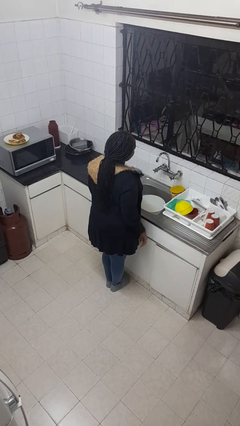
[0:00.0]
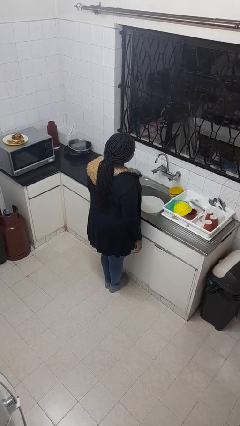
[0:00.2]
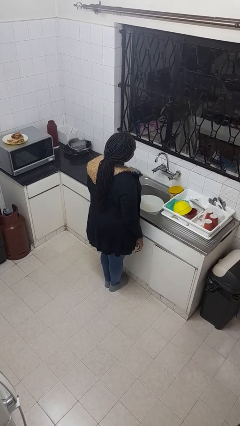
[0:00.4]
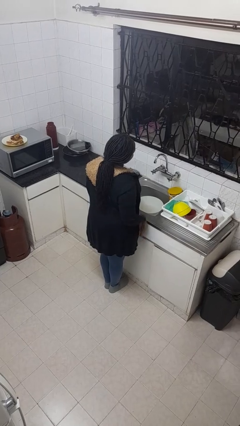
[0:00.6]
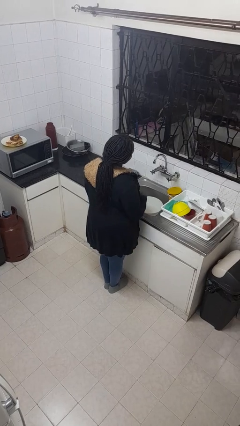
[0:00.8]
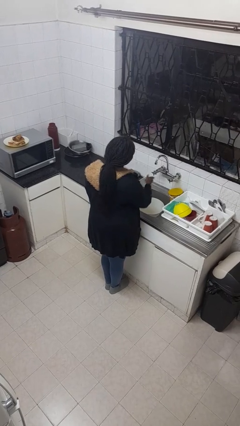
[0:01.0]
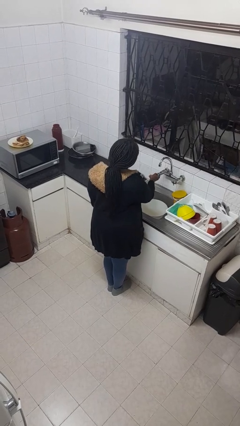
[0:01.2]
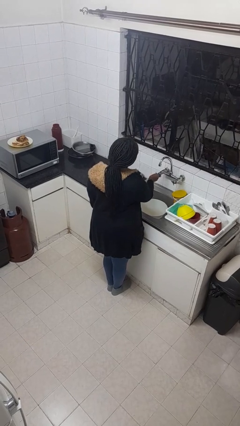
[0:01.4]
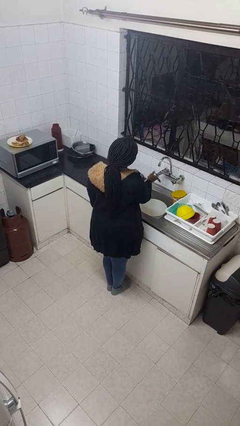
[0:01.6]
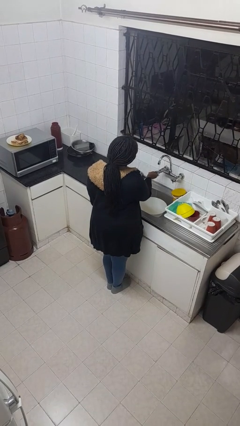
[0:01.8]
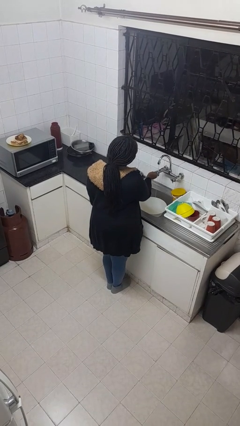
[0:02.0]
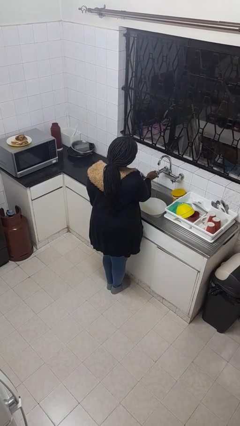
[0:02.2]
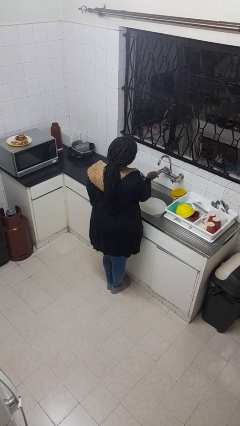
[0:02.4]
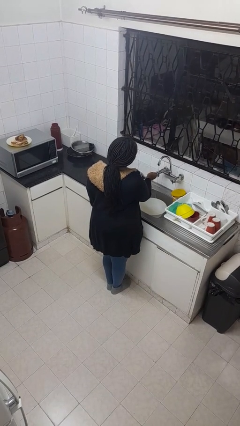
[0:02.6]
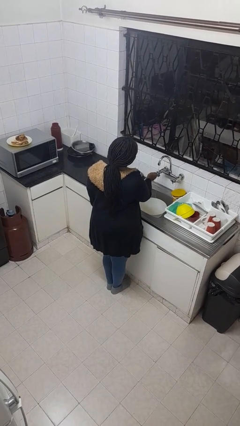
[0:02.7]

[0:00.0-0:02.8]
person turns on faucet

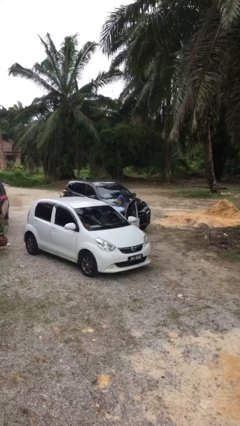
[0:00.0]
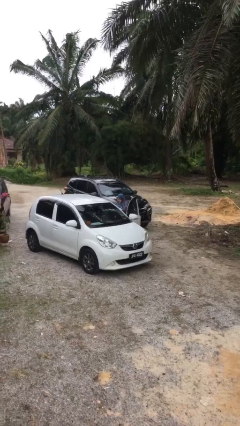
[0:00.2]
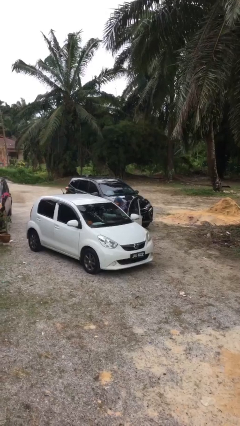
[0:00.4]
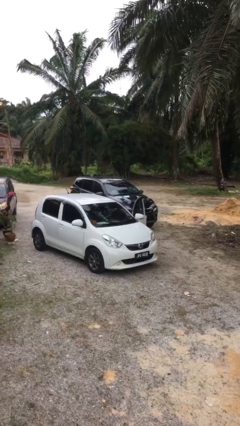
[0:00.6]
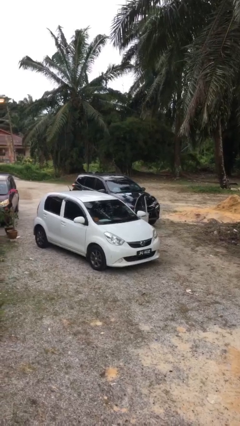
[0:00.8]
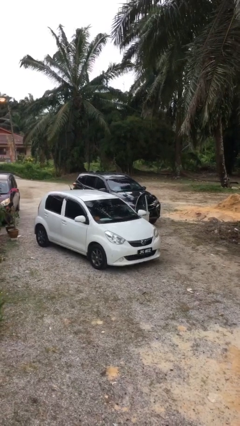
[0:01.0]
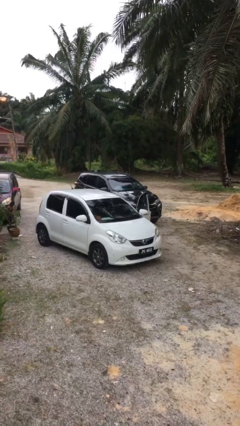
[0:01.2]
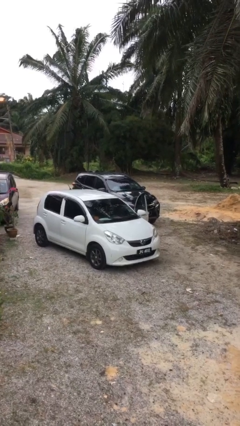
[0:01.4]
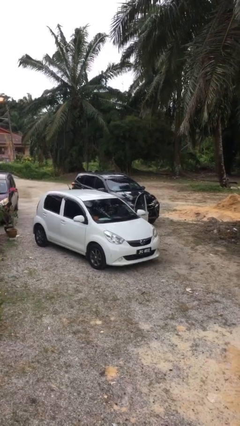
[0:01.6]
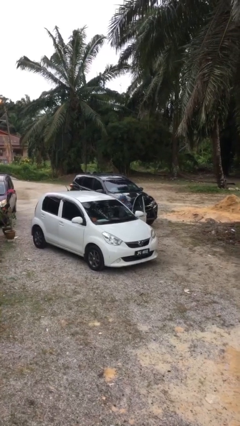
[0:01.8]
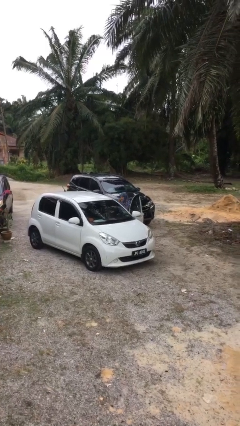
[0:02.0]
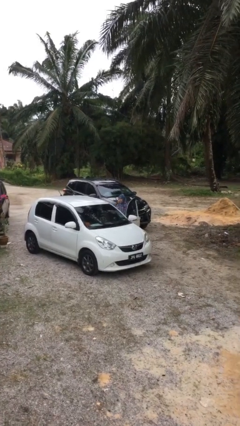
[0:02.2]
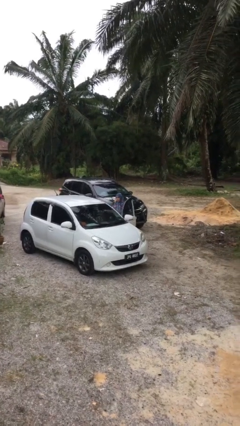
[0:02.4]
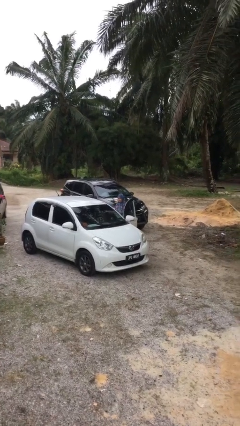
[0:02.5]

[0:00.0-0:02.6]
person loads car

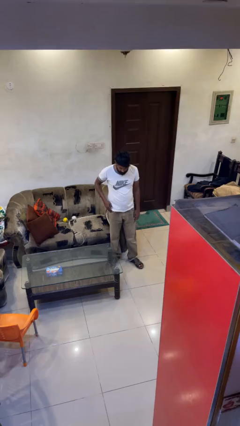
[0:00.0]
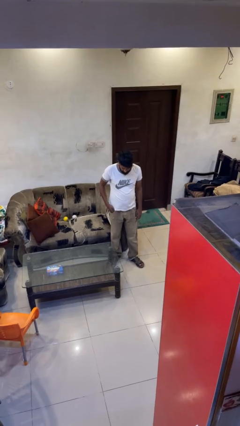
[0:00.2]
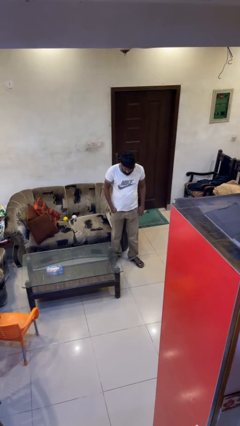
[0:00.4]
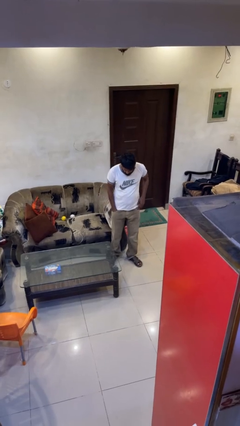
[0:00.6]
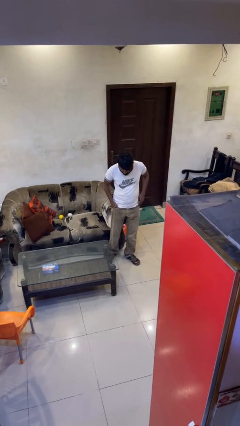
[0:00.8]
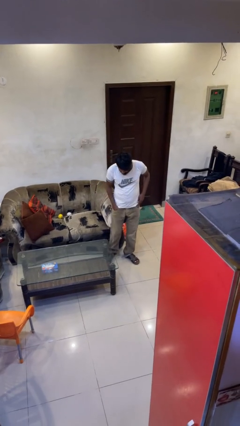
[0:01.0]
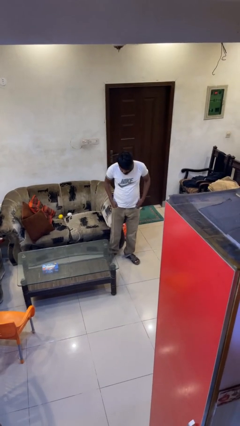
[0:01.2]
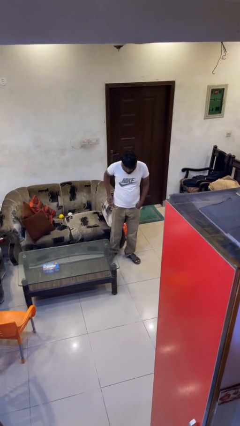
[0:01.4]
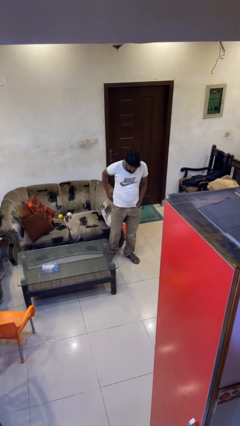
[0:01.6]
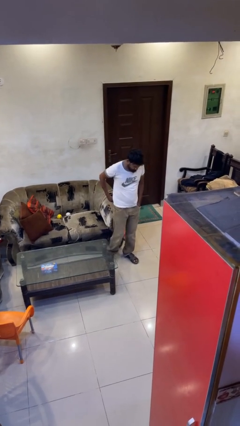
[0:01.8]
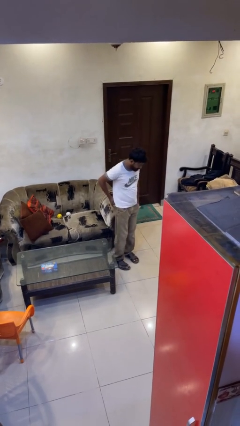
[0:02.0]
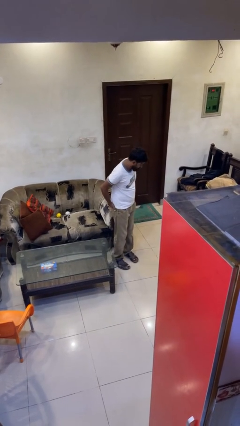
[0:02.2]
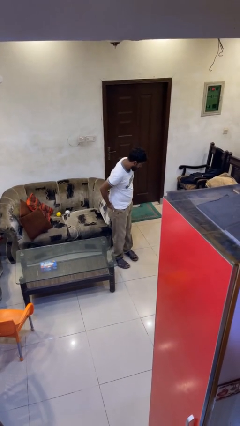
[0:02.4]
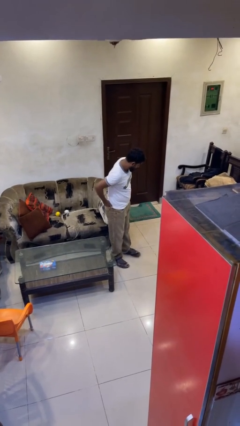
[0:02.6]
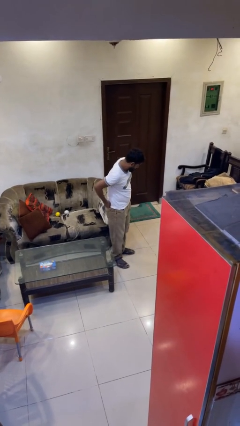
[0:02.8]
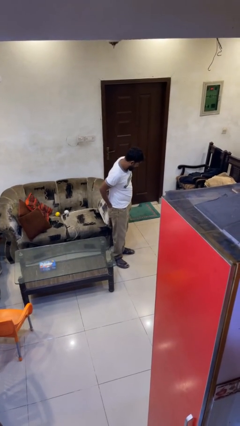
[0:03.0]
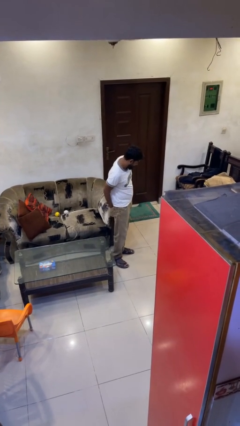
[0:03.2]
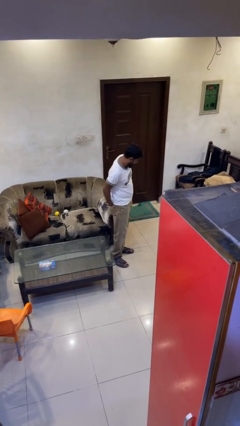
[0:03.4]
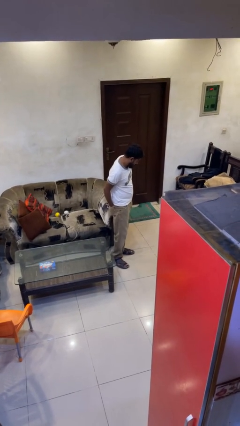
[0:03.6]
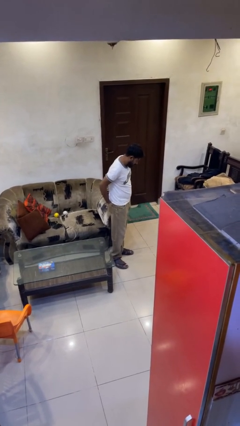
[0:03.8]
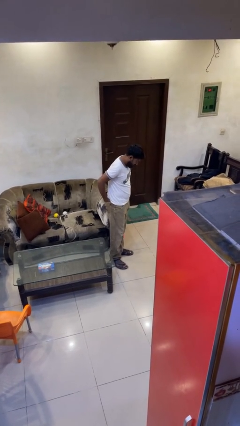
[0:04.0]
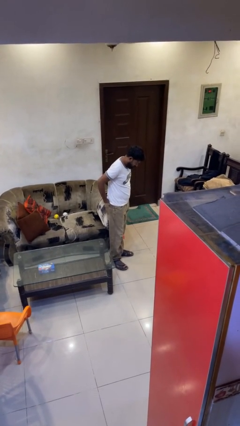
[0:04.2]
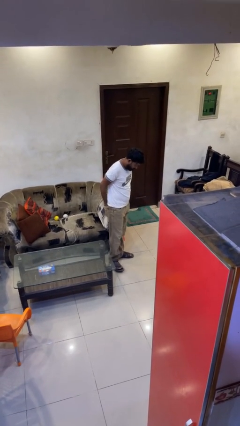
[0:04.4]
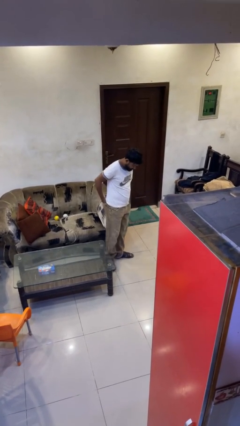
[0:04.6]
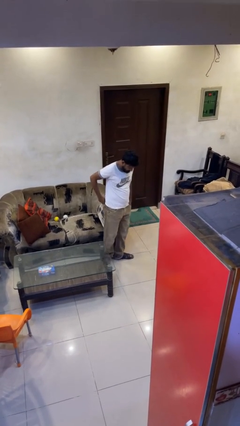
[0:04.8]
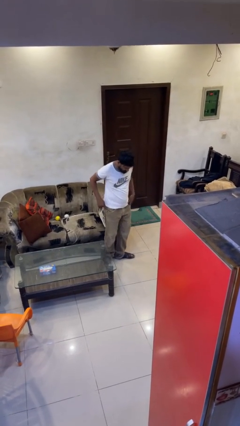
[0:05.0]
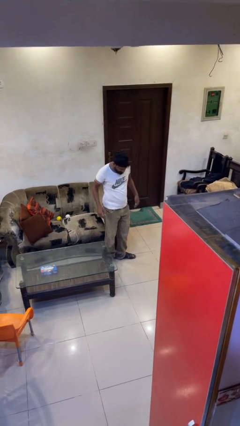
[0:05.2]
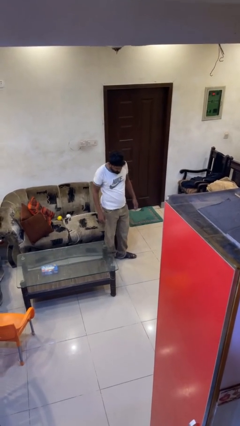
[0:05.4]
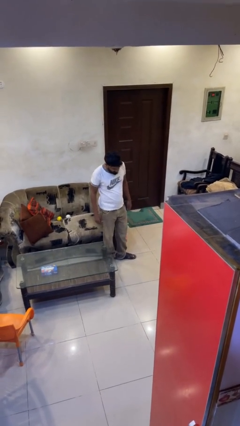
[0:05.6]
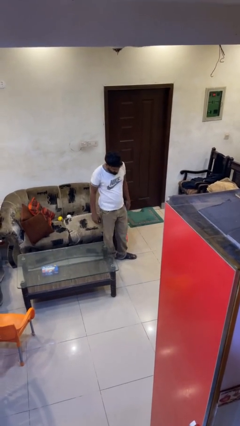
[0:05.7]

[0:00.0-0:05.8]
person puts hands in back pockets

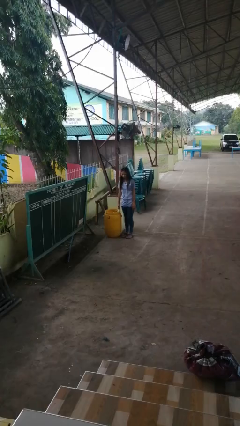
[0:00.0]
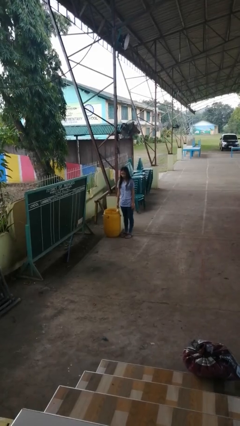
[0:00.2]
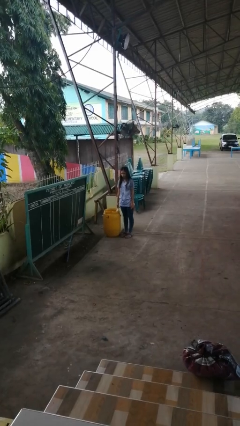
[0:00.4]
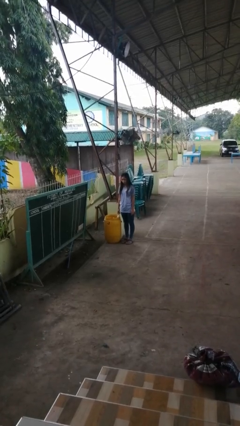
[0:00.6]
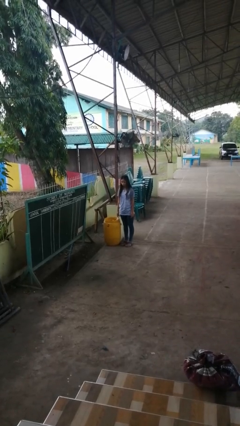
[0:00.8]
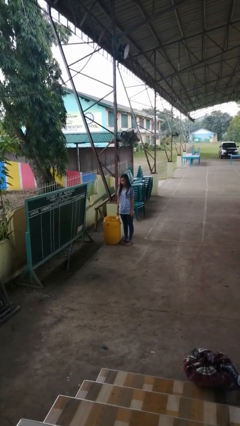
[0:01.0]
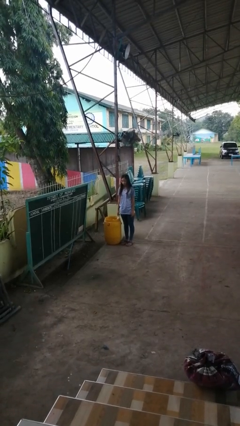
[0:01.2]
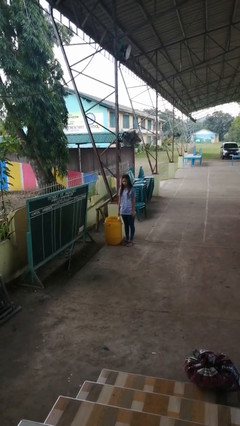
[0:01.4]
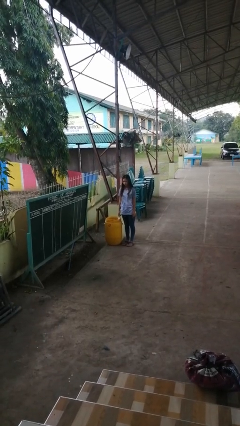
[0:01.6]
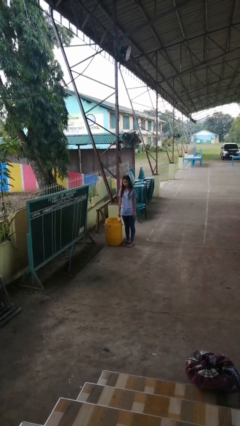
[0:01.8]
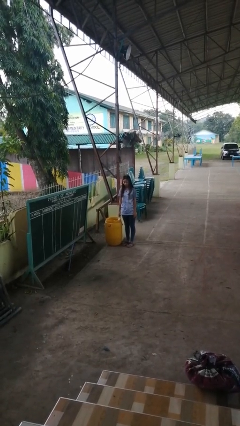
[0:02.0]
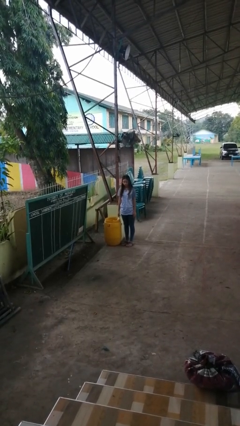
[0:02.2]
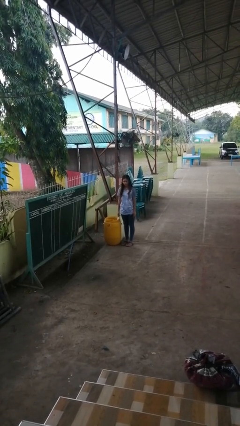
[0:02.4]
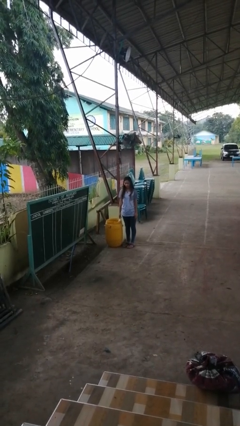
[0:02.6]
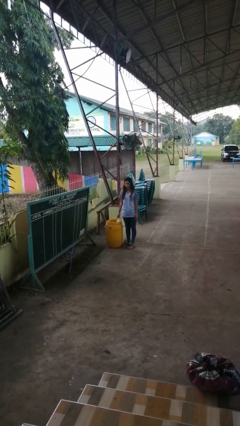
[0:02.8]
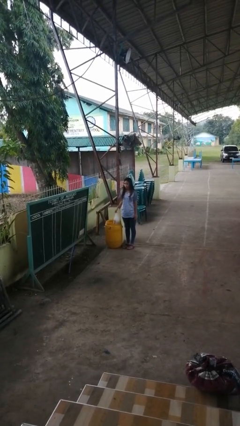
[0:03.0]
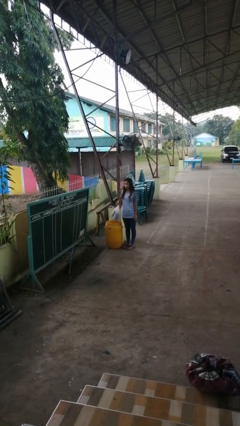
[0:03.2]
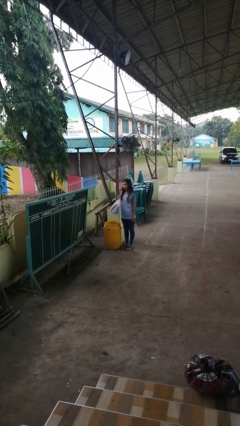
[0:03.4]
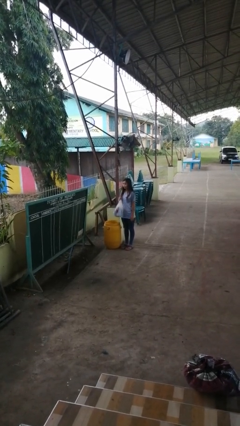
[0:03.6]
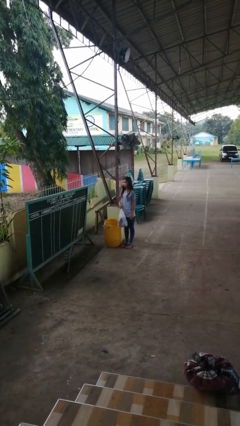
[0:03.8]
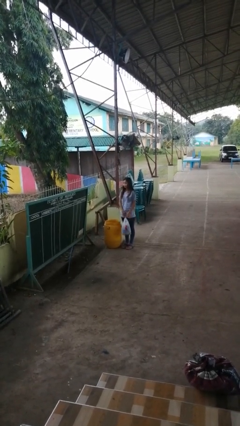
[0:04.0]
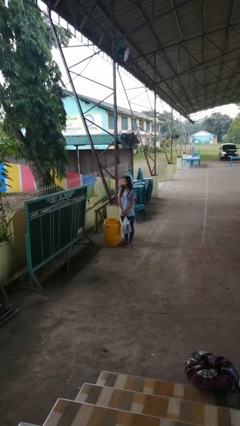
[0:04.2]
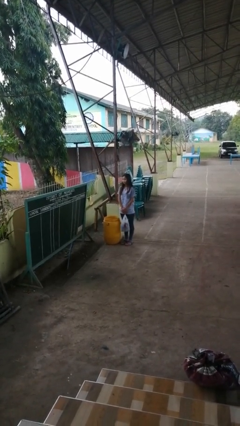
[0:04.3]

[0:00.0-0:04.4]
person removes trashbag from trashcan

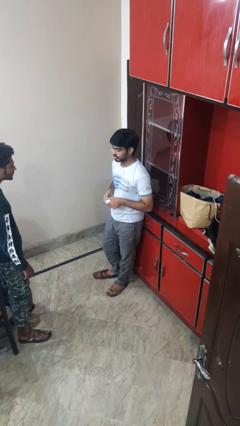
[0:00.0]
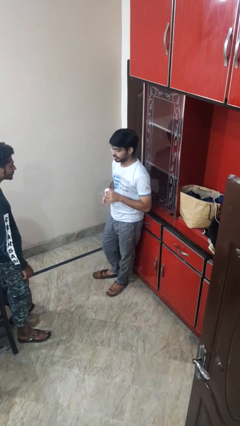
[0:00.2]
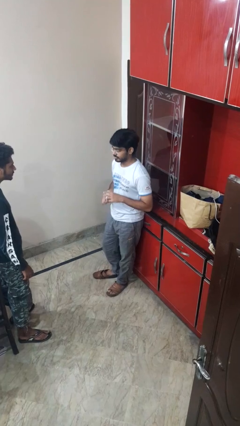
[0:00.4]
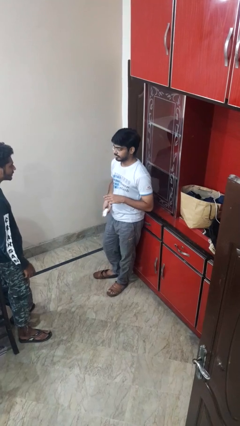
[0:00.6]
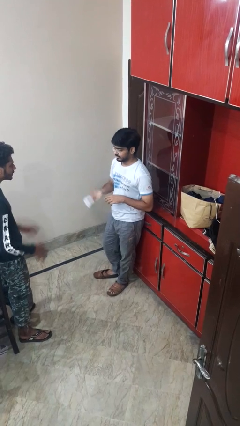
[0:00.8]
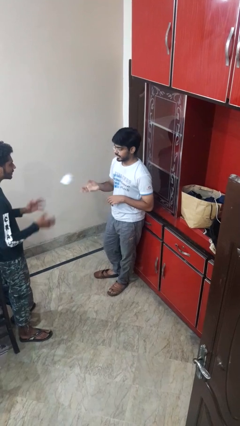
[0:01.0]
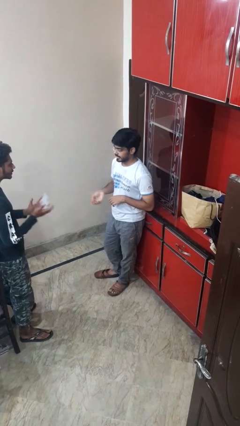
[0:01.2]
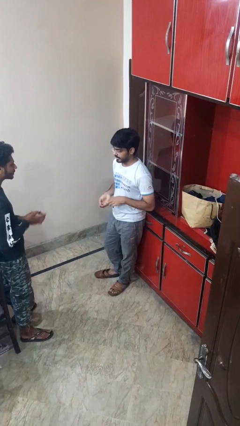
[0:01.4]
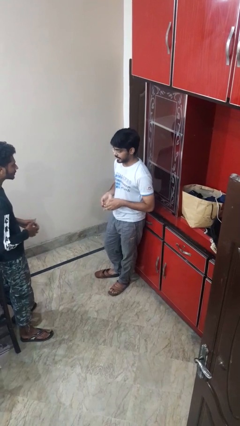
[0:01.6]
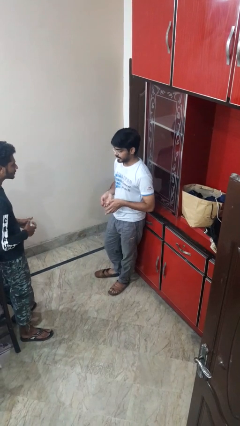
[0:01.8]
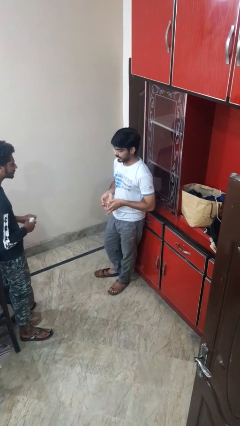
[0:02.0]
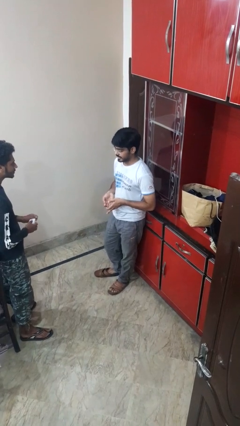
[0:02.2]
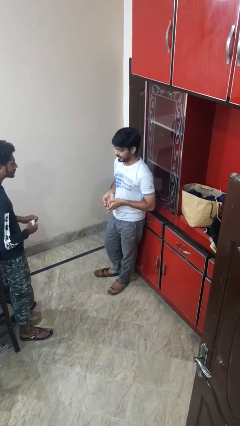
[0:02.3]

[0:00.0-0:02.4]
person throws object to person
